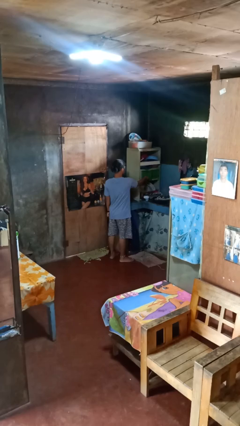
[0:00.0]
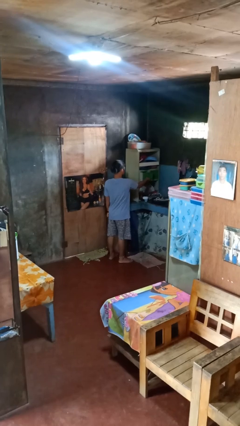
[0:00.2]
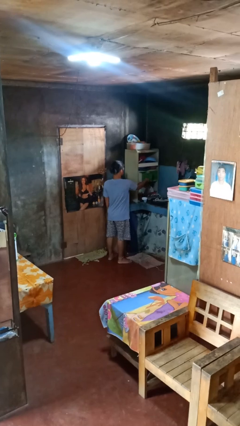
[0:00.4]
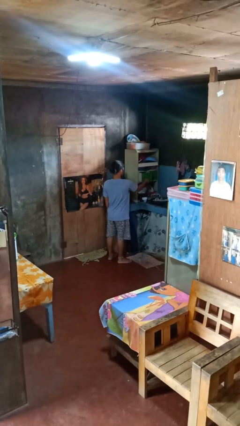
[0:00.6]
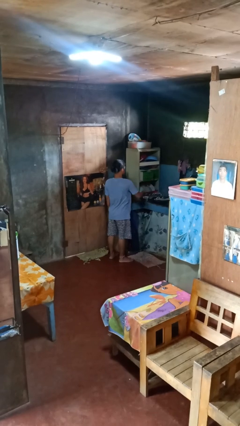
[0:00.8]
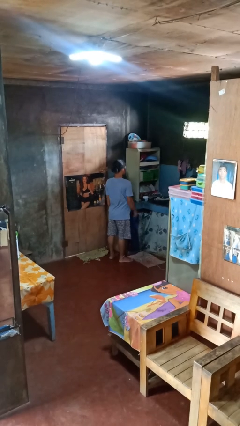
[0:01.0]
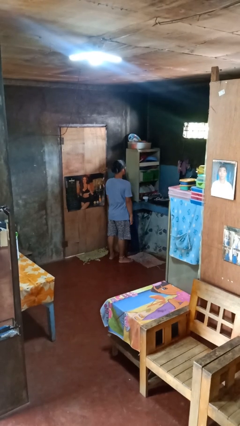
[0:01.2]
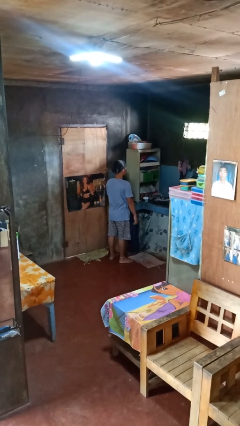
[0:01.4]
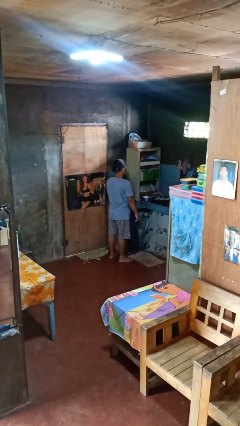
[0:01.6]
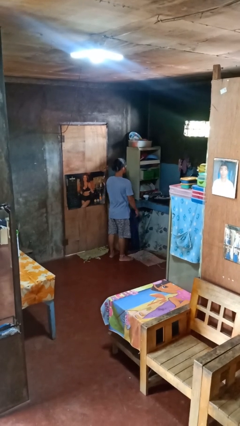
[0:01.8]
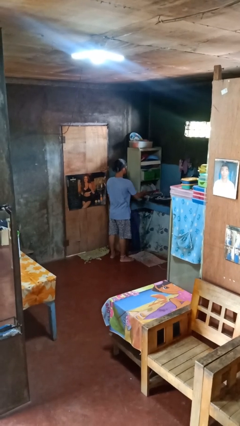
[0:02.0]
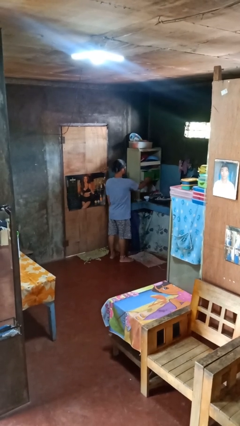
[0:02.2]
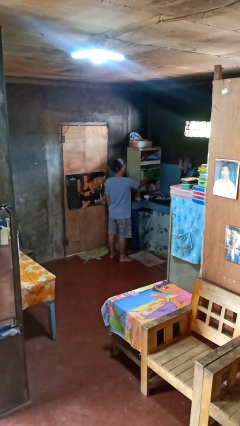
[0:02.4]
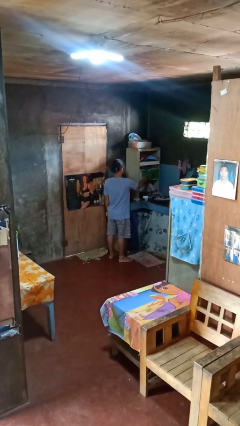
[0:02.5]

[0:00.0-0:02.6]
person opens kitchen drawer

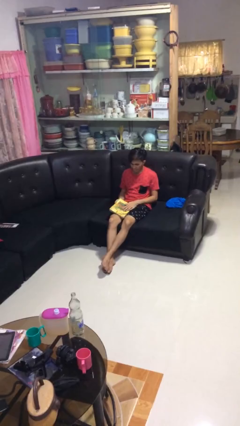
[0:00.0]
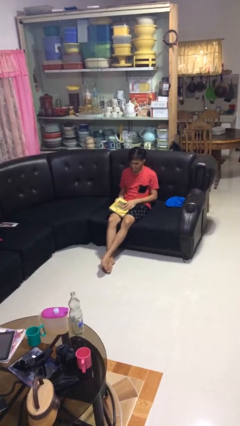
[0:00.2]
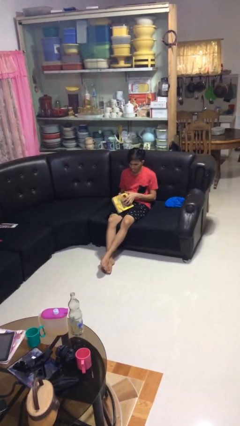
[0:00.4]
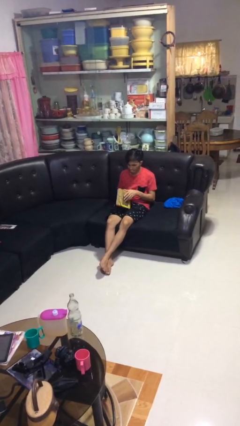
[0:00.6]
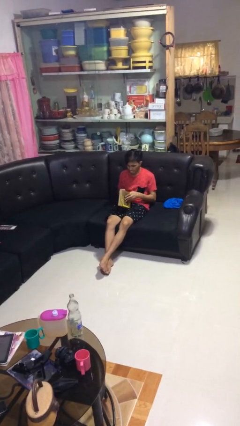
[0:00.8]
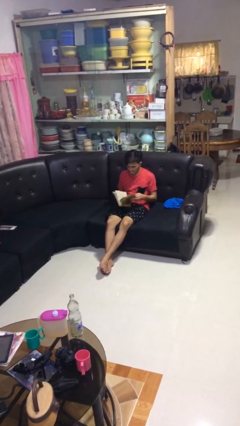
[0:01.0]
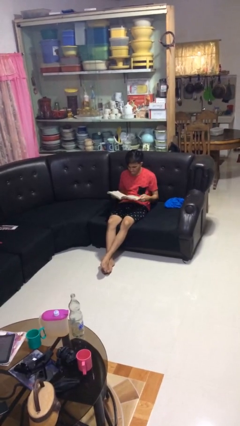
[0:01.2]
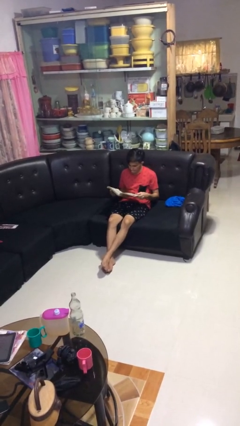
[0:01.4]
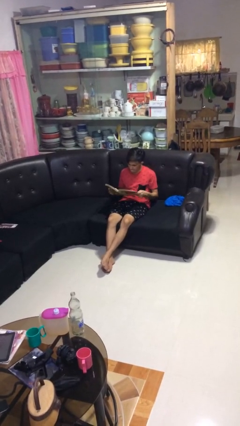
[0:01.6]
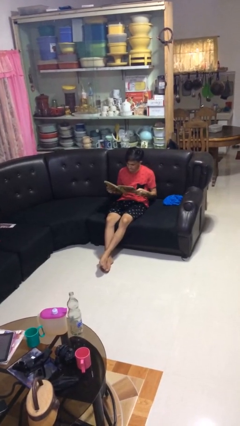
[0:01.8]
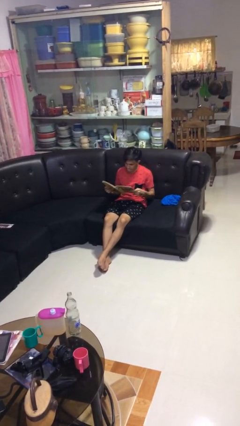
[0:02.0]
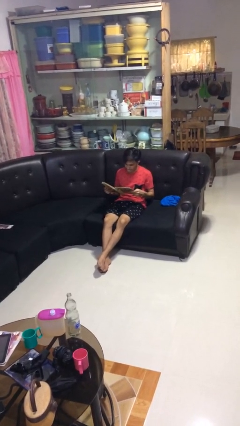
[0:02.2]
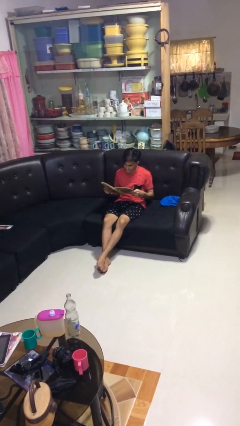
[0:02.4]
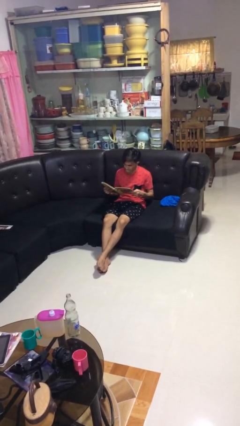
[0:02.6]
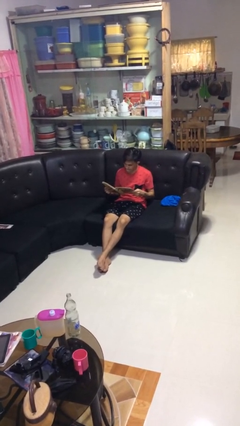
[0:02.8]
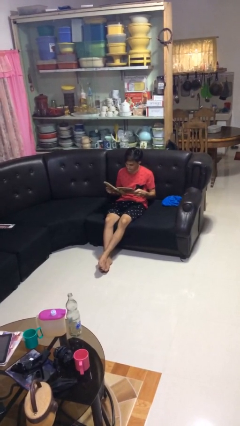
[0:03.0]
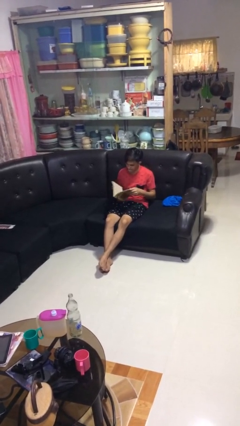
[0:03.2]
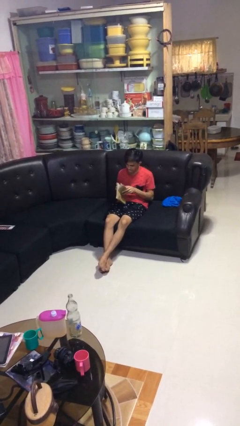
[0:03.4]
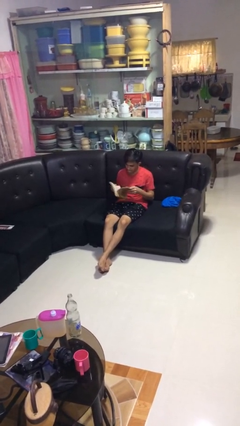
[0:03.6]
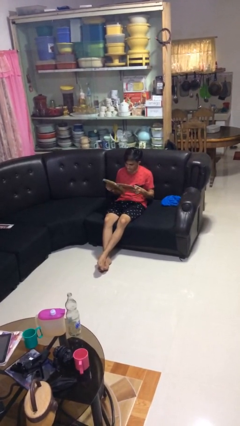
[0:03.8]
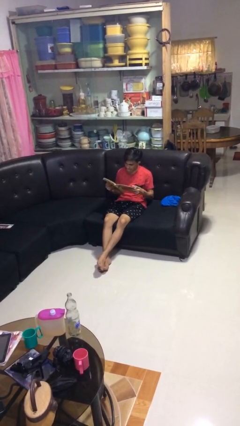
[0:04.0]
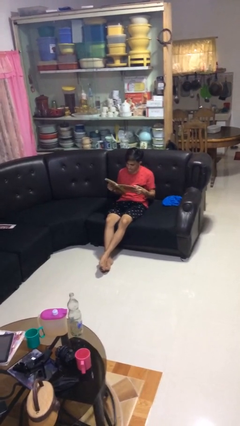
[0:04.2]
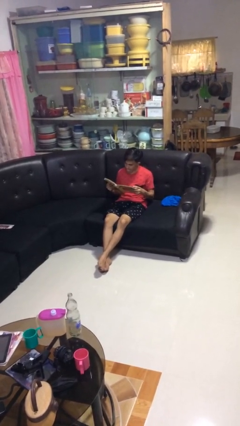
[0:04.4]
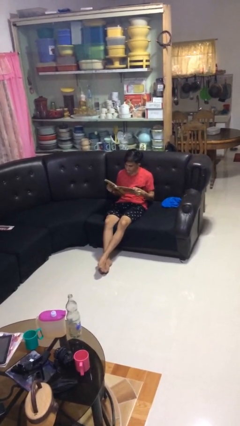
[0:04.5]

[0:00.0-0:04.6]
person reads book

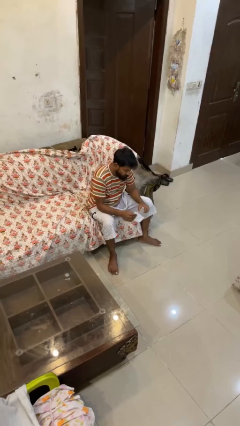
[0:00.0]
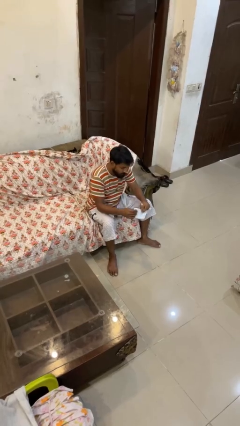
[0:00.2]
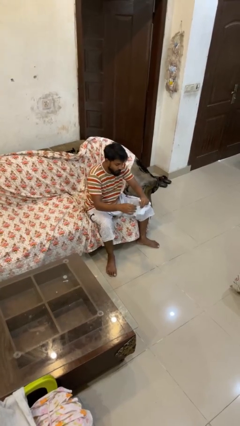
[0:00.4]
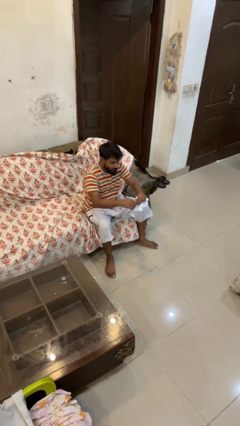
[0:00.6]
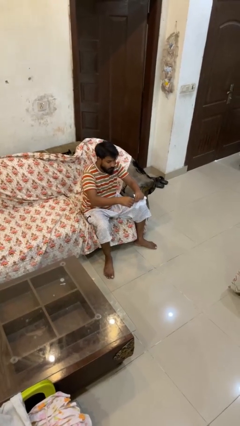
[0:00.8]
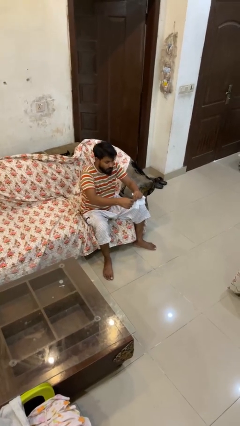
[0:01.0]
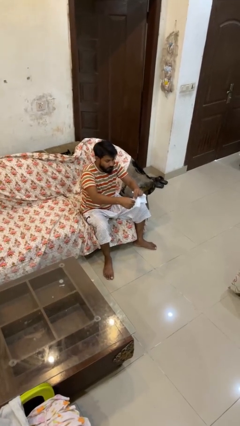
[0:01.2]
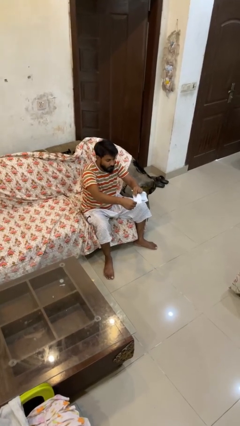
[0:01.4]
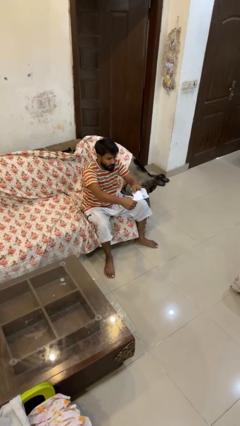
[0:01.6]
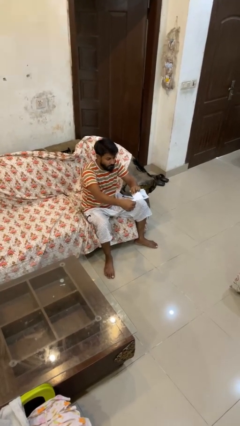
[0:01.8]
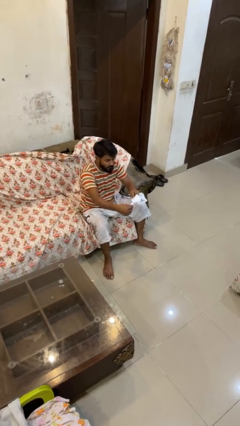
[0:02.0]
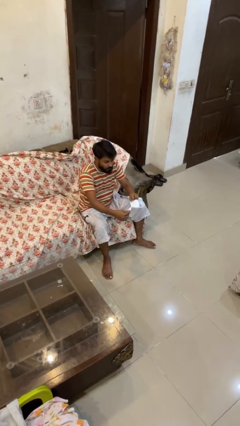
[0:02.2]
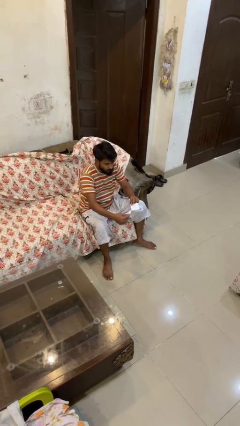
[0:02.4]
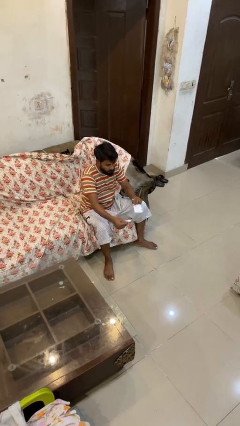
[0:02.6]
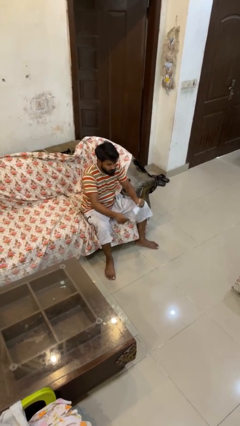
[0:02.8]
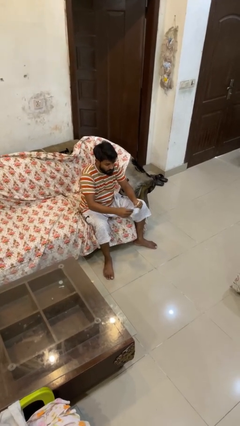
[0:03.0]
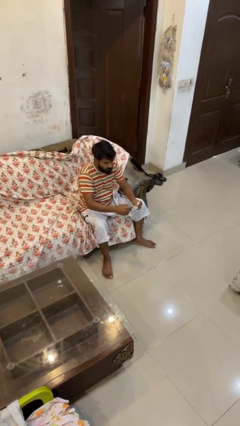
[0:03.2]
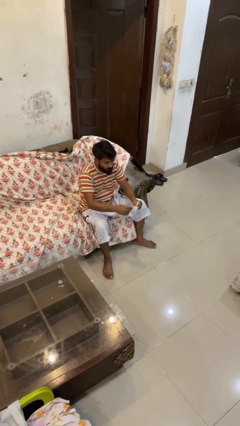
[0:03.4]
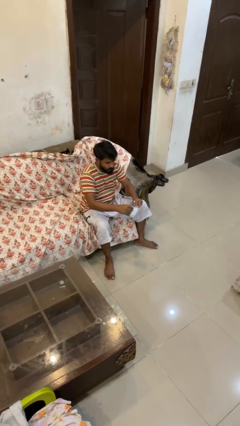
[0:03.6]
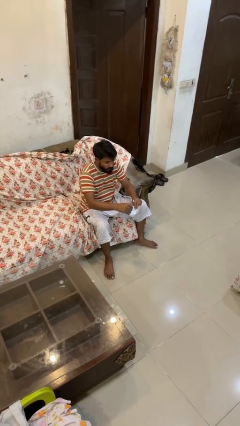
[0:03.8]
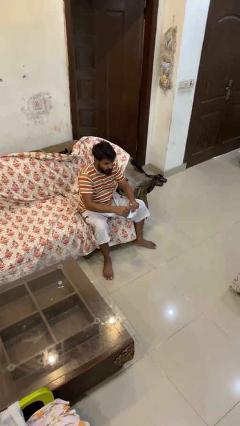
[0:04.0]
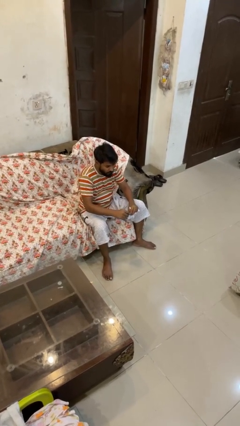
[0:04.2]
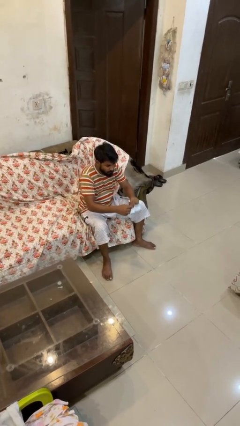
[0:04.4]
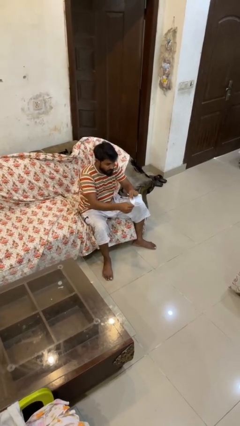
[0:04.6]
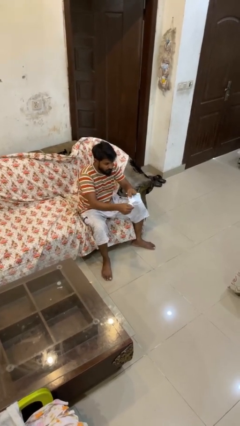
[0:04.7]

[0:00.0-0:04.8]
person tears paper

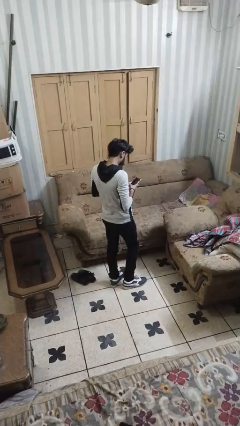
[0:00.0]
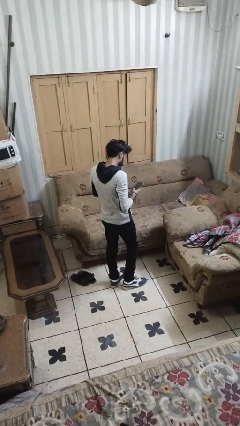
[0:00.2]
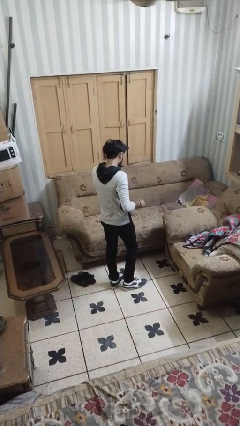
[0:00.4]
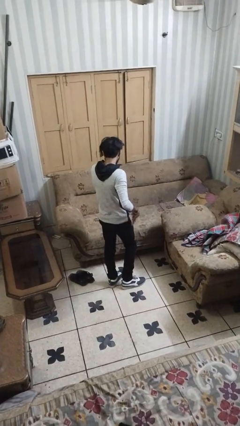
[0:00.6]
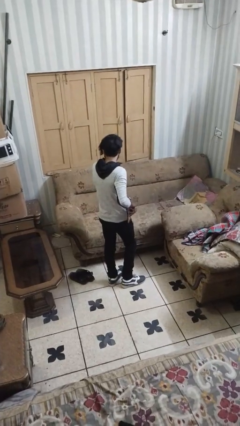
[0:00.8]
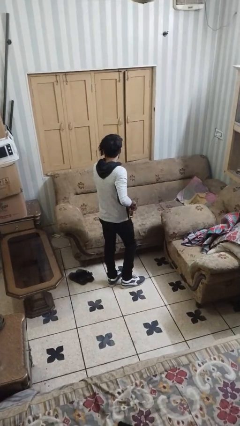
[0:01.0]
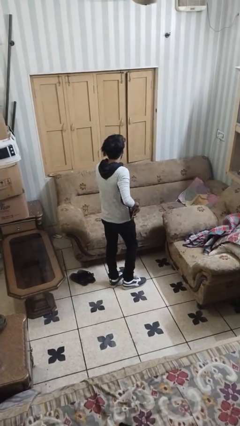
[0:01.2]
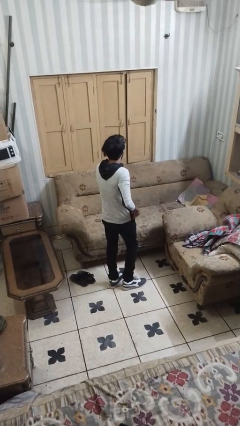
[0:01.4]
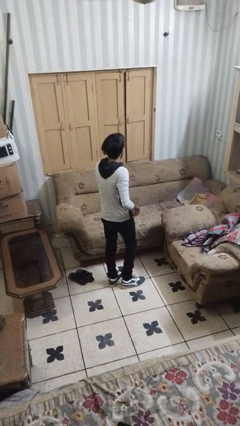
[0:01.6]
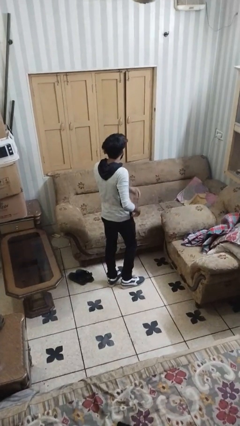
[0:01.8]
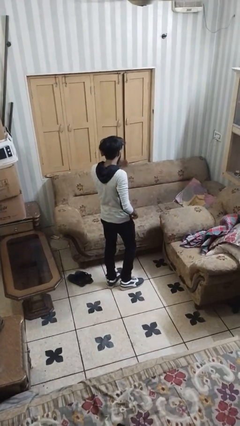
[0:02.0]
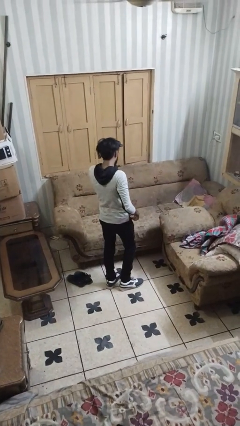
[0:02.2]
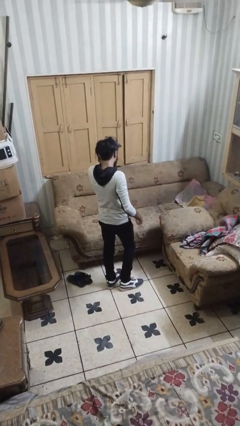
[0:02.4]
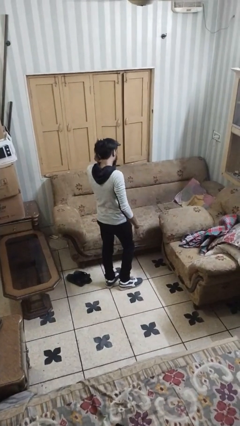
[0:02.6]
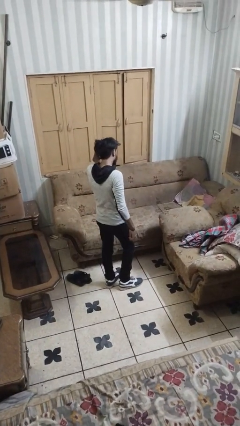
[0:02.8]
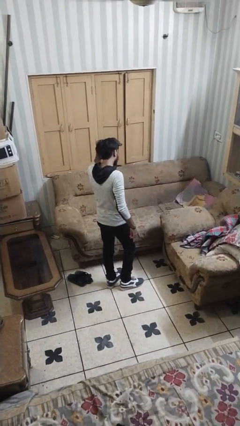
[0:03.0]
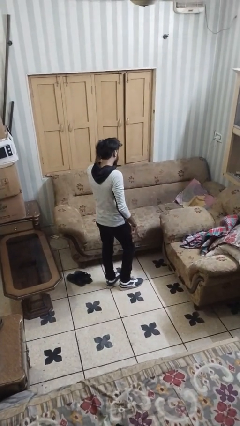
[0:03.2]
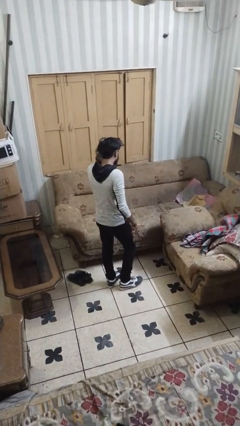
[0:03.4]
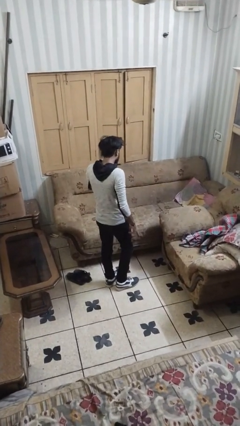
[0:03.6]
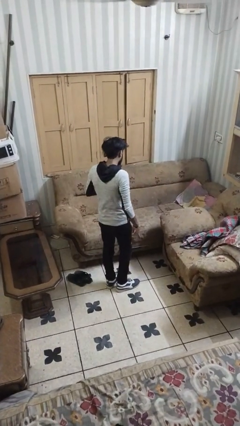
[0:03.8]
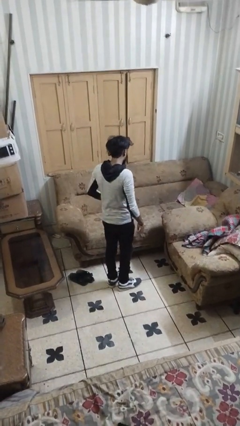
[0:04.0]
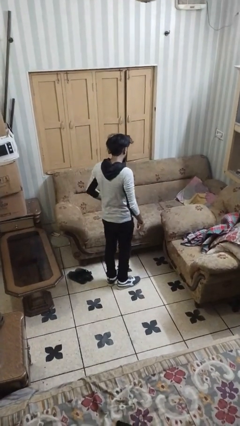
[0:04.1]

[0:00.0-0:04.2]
person puts phone into pocket

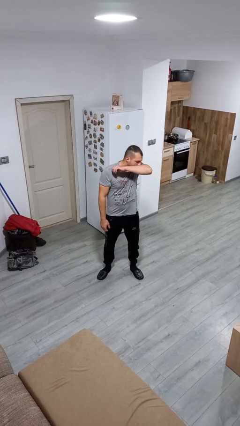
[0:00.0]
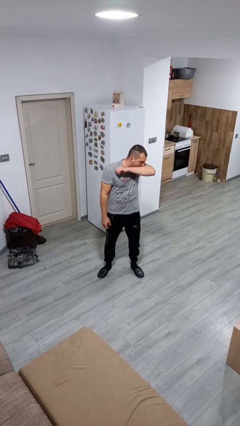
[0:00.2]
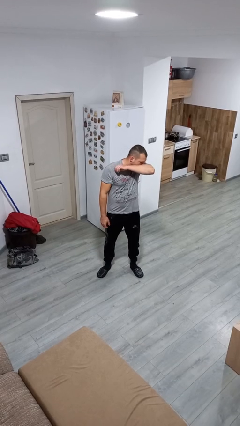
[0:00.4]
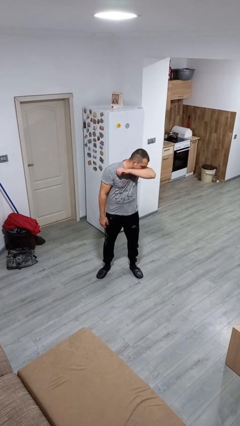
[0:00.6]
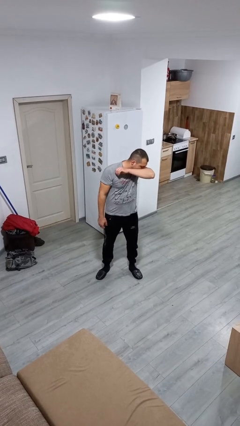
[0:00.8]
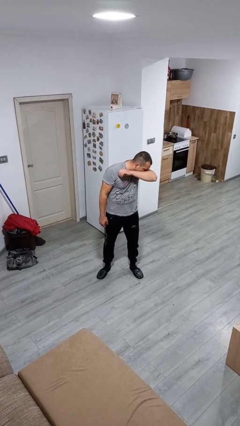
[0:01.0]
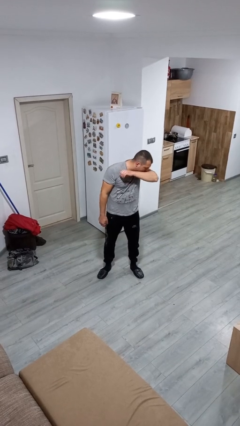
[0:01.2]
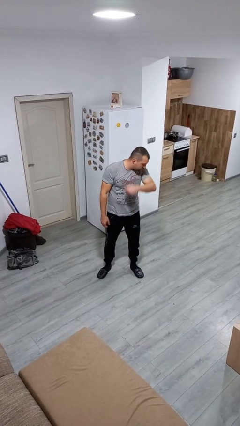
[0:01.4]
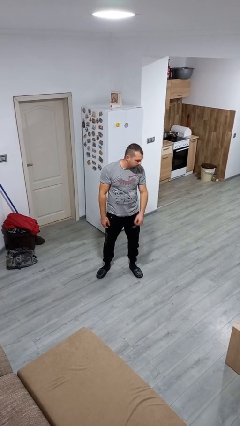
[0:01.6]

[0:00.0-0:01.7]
person sneezes into arm
